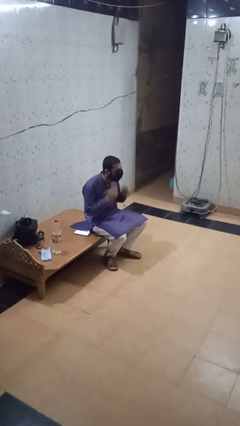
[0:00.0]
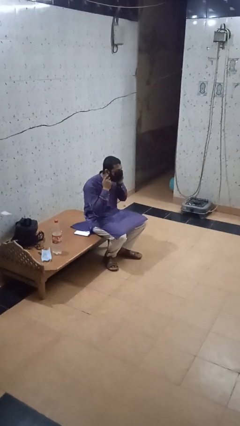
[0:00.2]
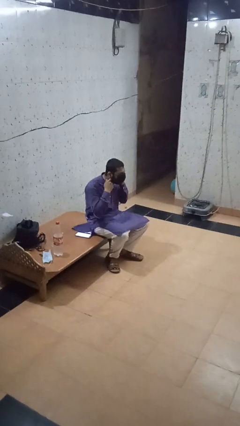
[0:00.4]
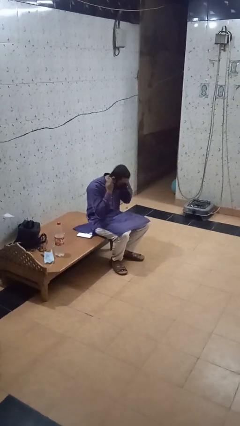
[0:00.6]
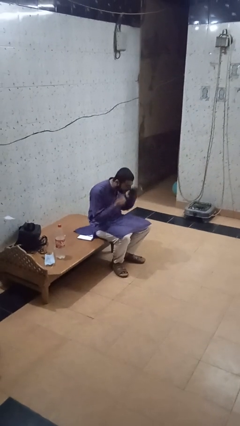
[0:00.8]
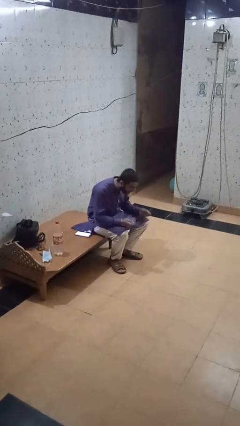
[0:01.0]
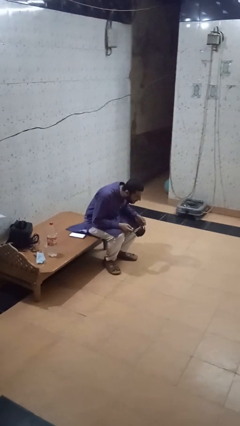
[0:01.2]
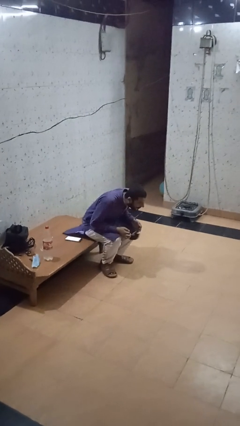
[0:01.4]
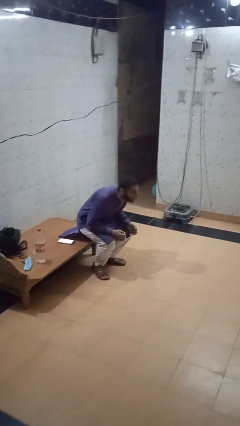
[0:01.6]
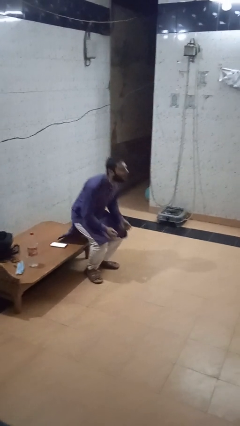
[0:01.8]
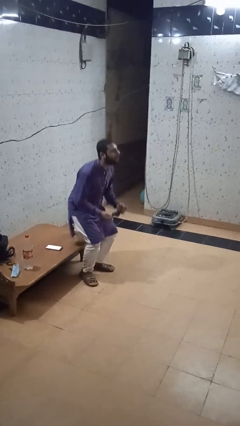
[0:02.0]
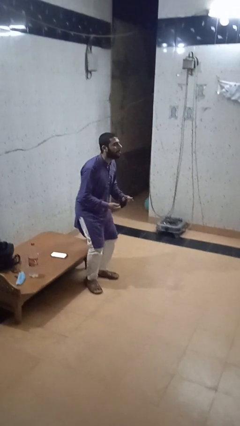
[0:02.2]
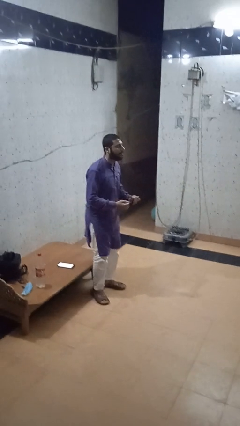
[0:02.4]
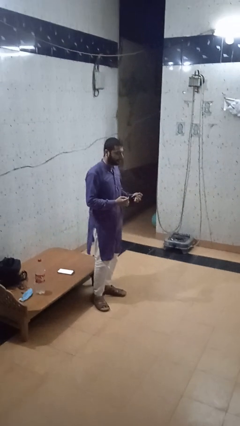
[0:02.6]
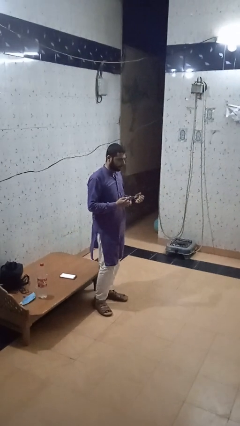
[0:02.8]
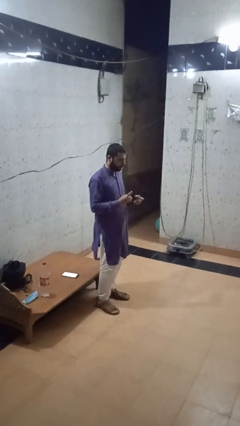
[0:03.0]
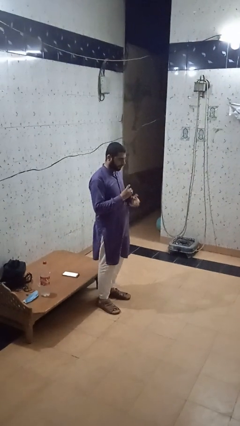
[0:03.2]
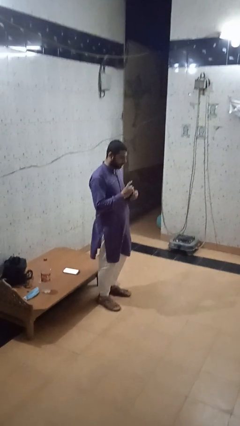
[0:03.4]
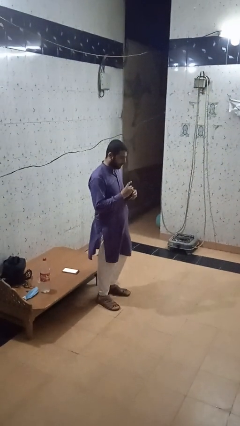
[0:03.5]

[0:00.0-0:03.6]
person takes off facemask

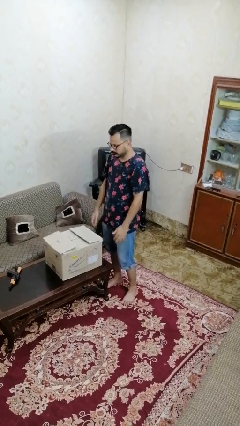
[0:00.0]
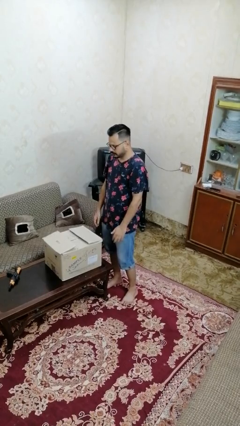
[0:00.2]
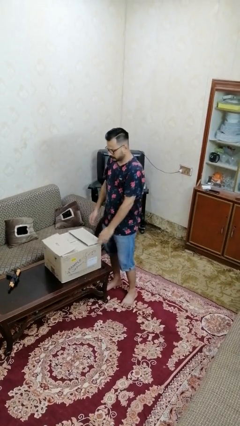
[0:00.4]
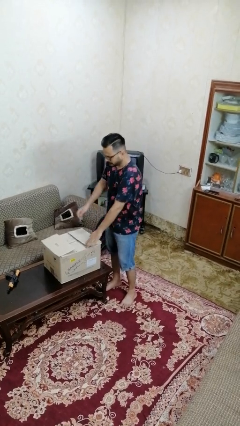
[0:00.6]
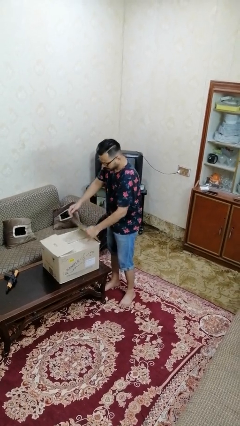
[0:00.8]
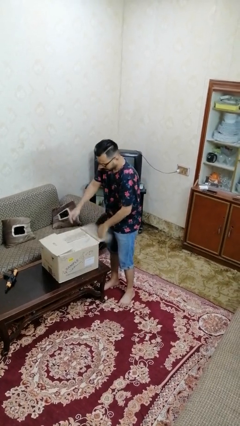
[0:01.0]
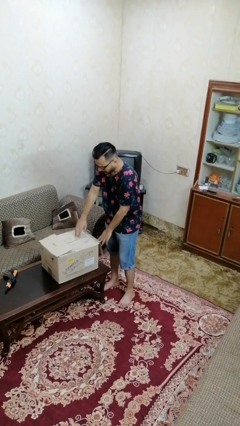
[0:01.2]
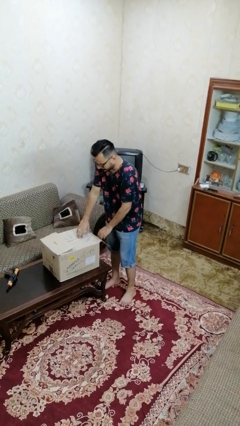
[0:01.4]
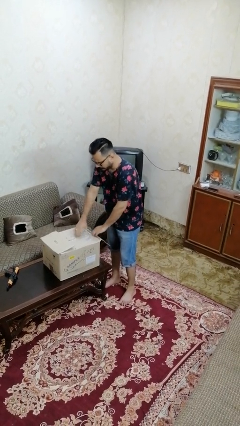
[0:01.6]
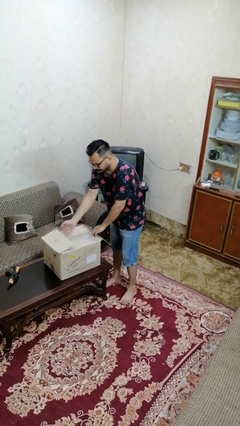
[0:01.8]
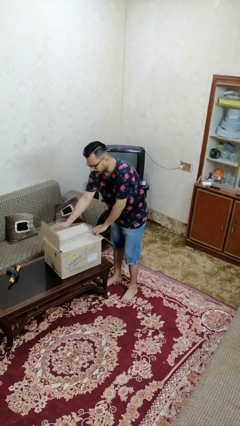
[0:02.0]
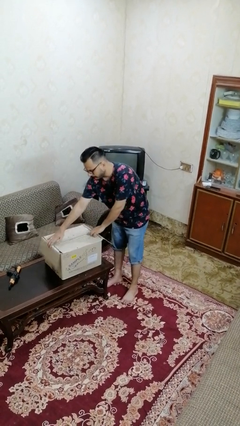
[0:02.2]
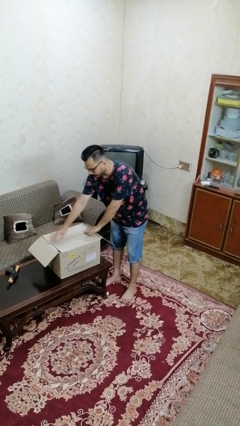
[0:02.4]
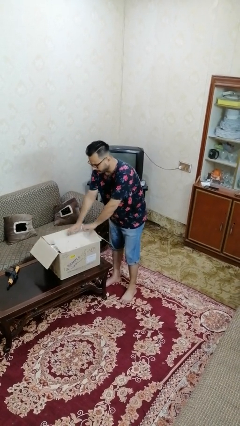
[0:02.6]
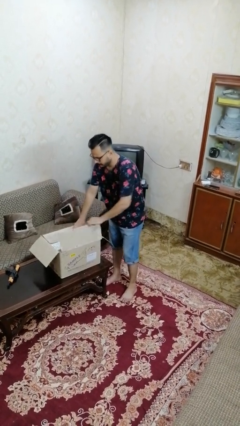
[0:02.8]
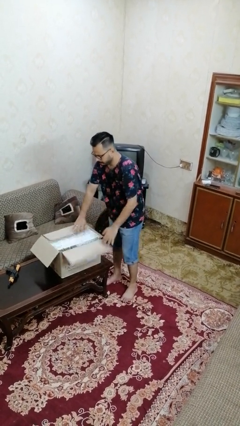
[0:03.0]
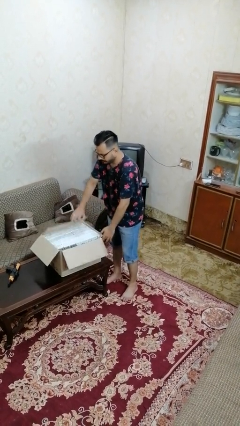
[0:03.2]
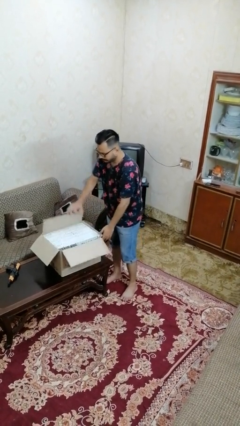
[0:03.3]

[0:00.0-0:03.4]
person opens box

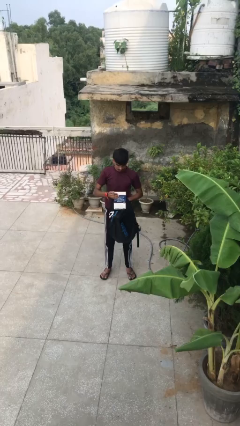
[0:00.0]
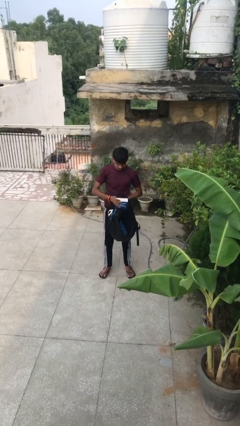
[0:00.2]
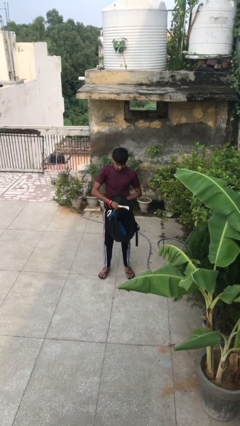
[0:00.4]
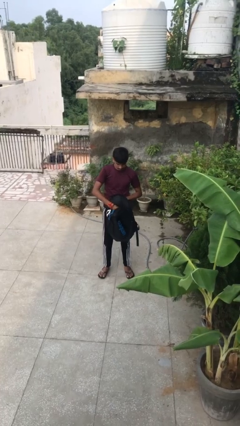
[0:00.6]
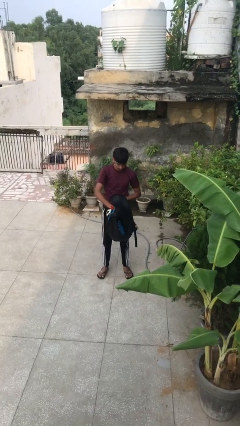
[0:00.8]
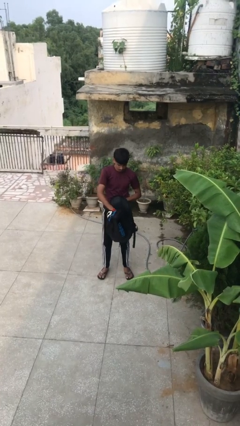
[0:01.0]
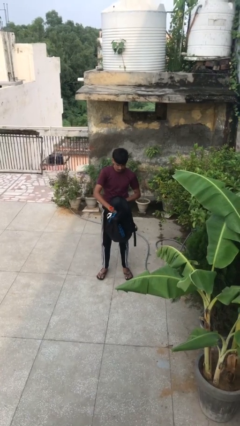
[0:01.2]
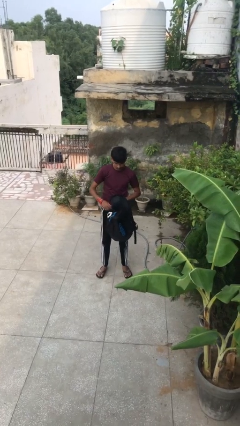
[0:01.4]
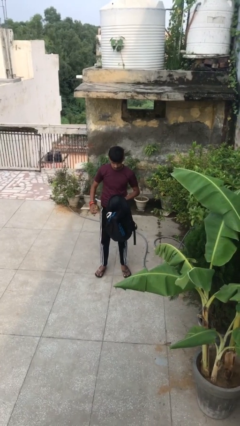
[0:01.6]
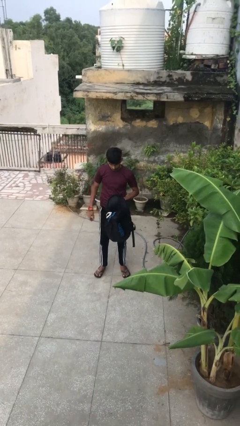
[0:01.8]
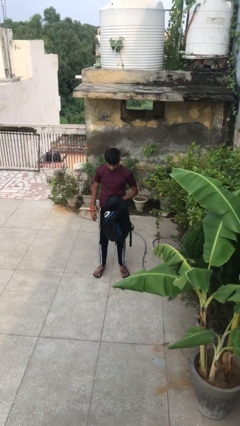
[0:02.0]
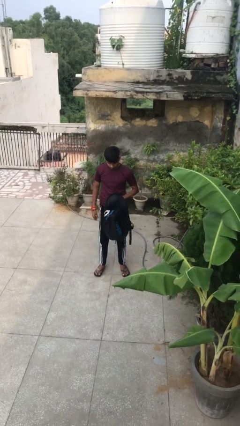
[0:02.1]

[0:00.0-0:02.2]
person puts object into backpack

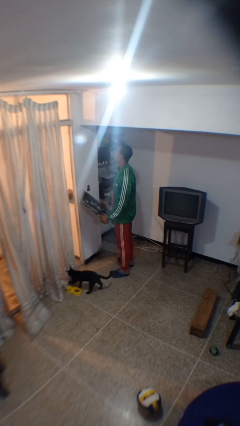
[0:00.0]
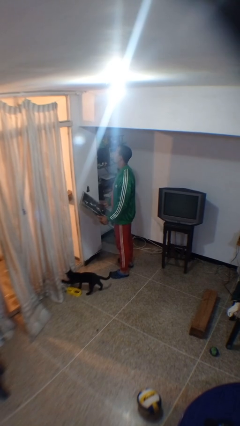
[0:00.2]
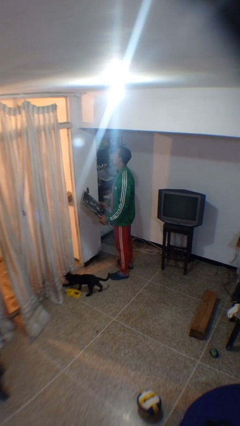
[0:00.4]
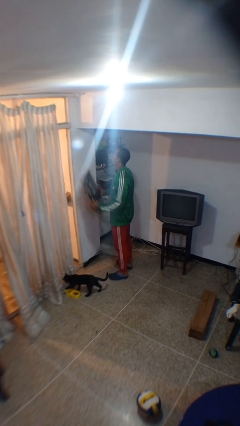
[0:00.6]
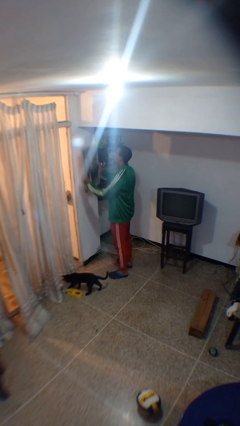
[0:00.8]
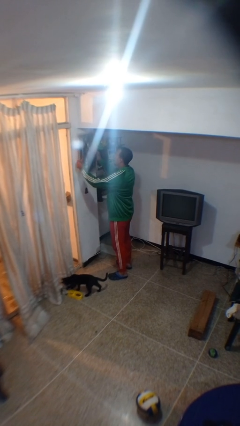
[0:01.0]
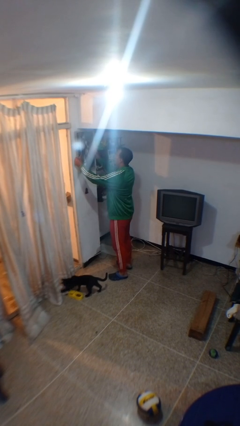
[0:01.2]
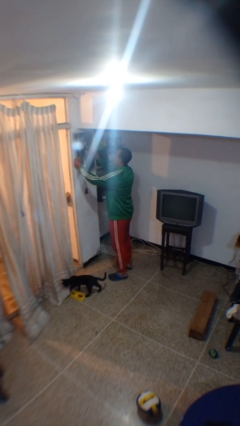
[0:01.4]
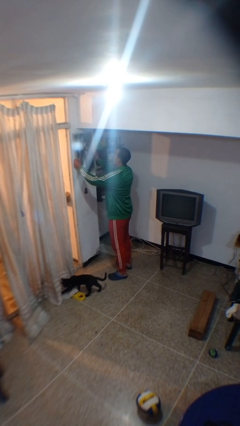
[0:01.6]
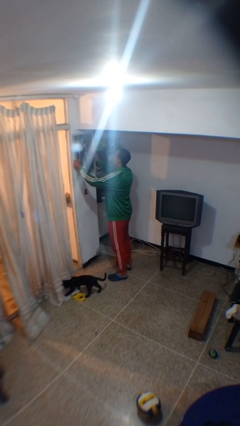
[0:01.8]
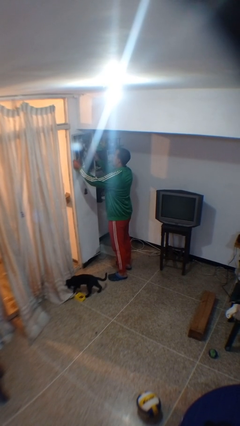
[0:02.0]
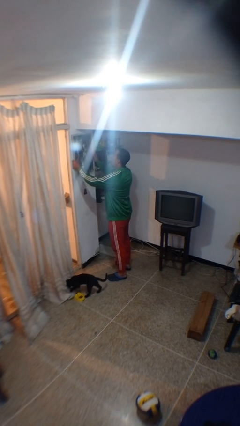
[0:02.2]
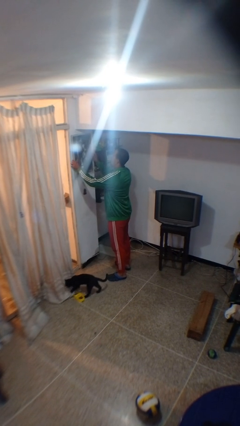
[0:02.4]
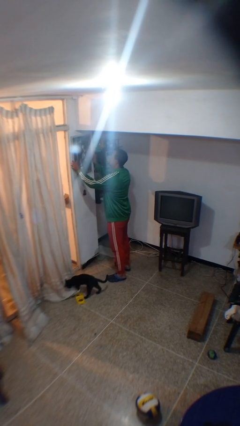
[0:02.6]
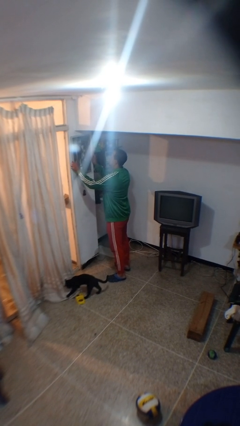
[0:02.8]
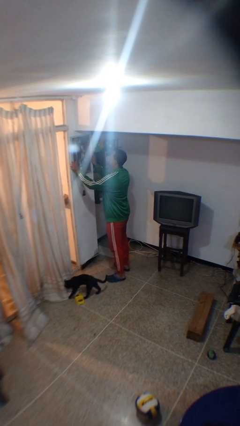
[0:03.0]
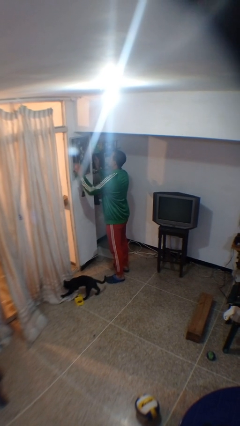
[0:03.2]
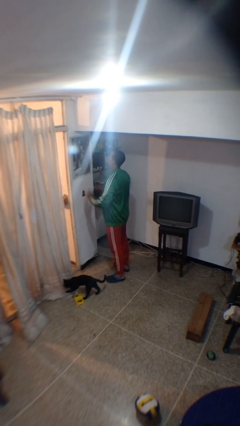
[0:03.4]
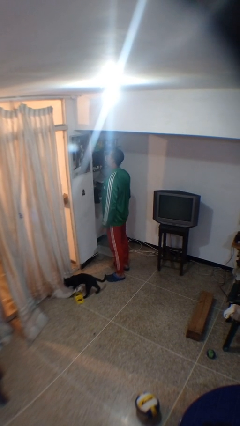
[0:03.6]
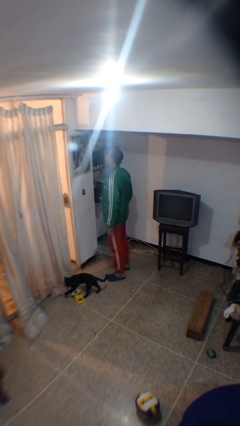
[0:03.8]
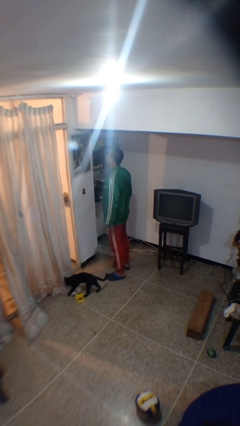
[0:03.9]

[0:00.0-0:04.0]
person puts up picture frame

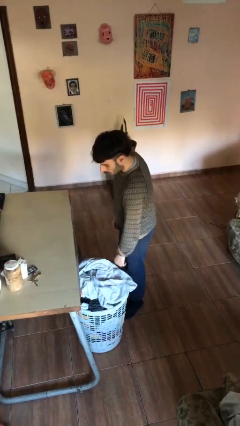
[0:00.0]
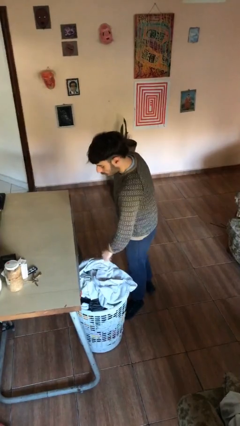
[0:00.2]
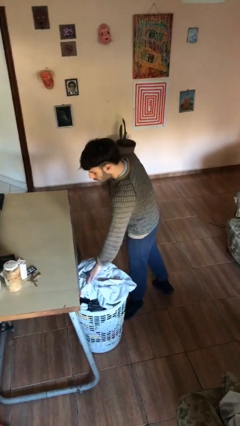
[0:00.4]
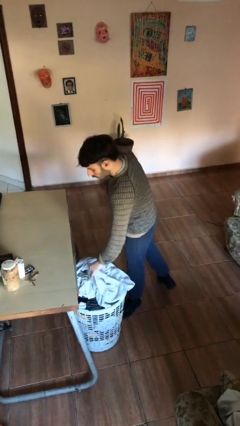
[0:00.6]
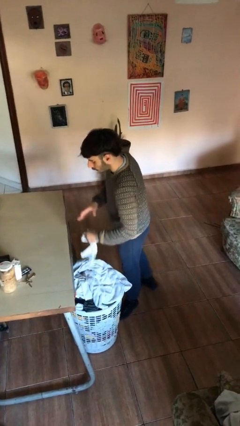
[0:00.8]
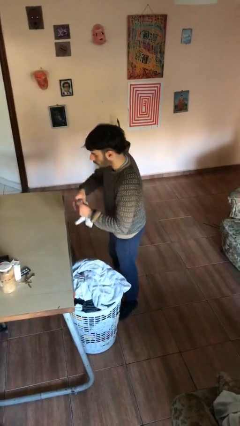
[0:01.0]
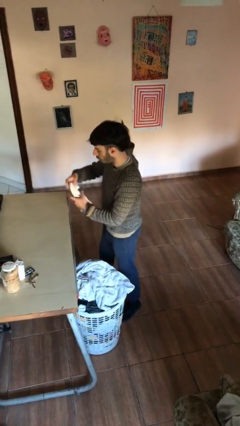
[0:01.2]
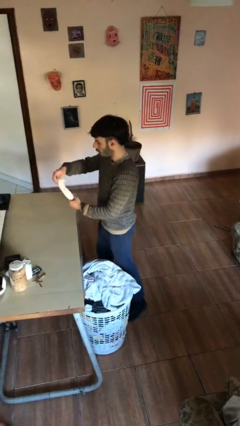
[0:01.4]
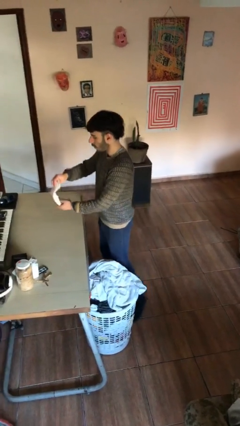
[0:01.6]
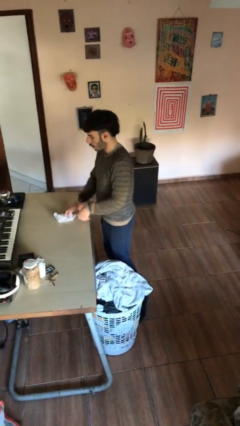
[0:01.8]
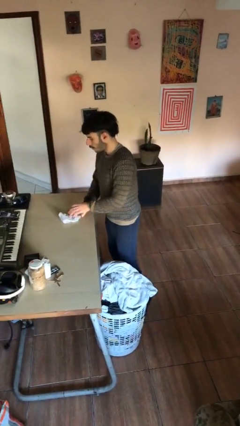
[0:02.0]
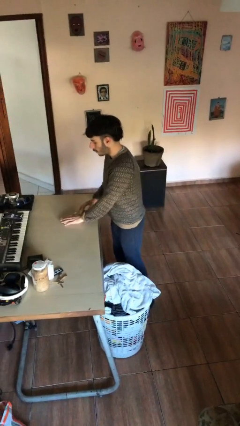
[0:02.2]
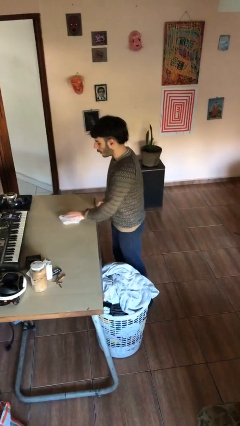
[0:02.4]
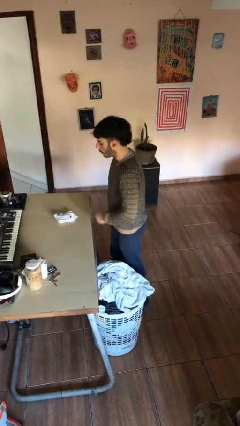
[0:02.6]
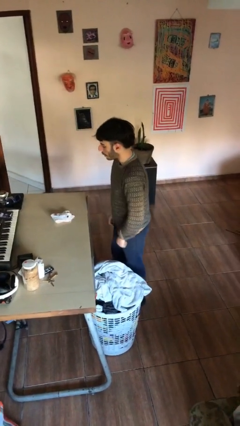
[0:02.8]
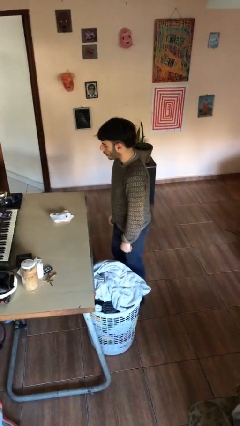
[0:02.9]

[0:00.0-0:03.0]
person folds socks

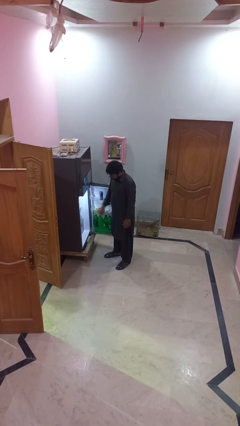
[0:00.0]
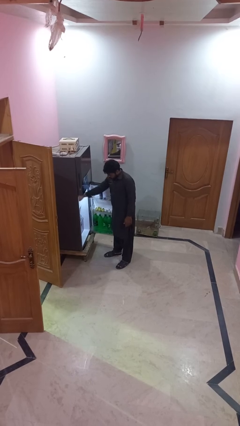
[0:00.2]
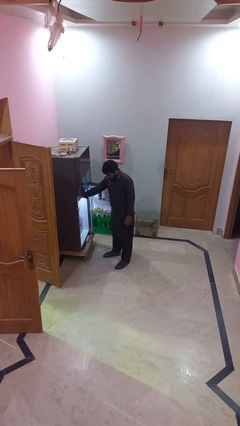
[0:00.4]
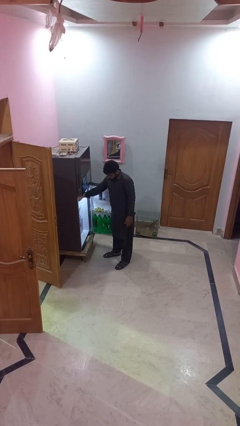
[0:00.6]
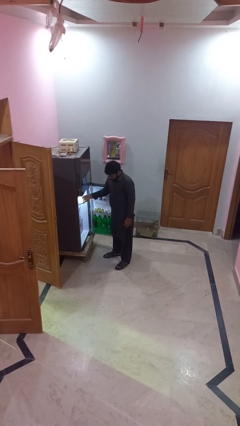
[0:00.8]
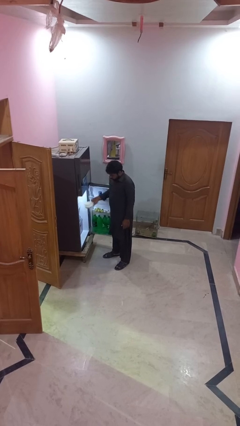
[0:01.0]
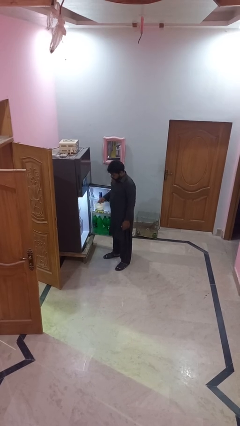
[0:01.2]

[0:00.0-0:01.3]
person takes object from refrigerator
